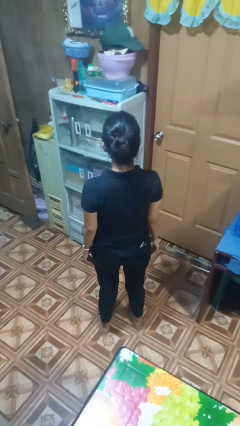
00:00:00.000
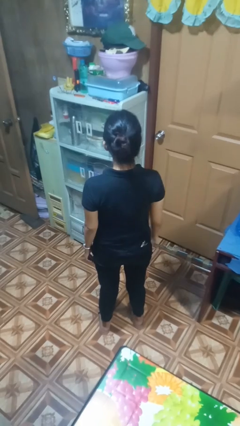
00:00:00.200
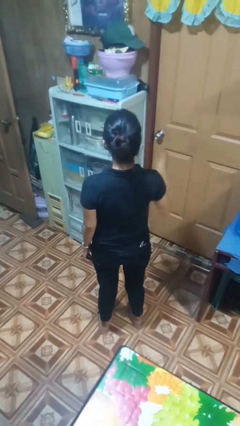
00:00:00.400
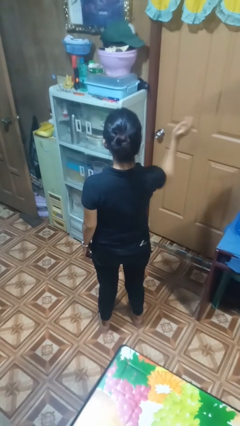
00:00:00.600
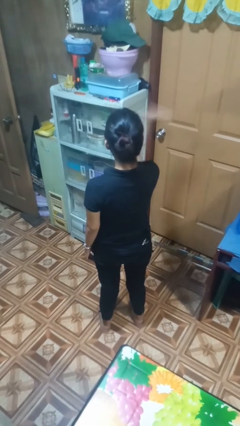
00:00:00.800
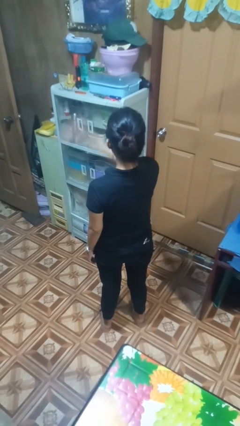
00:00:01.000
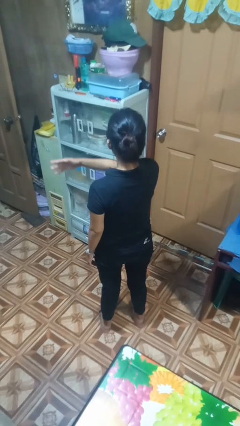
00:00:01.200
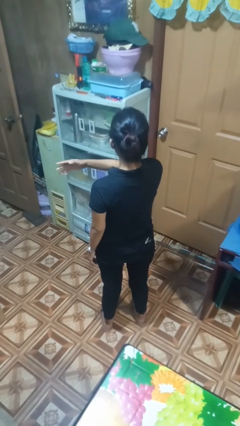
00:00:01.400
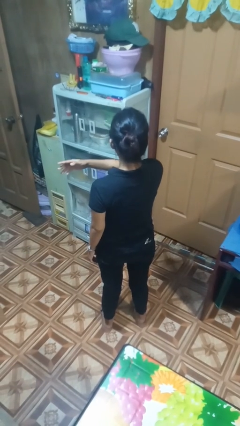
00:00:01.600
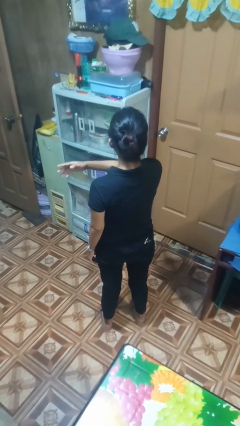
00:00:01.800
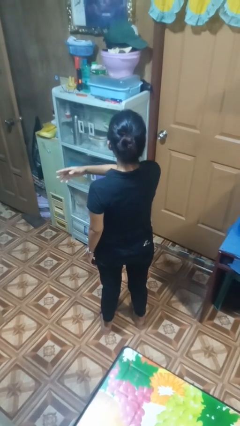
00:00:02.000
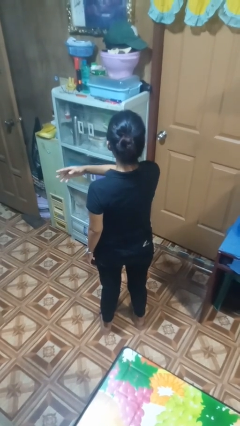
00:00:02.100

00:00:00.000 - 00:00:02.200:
person gestures swipe left

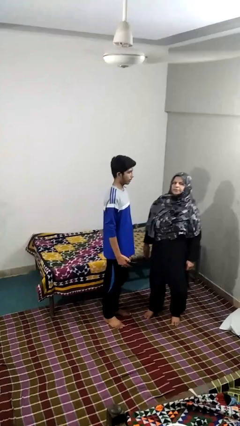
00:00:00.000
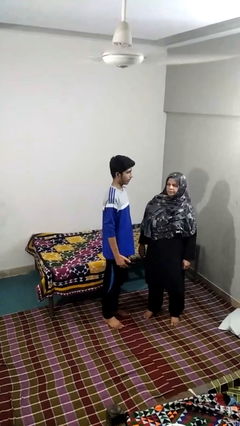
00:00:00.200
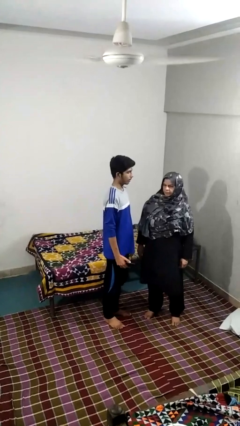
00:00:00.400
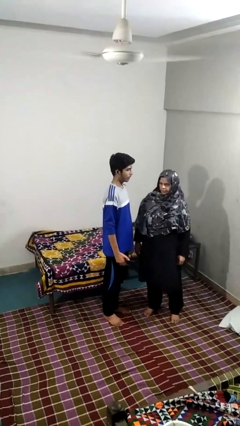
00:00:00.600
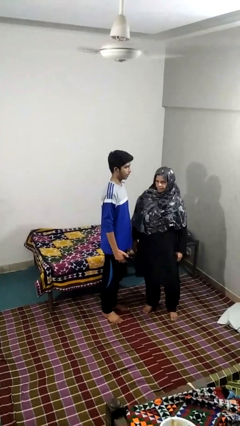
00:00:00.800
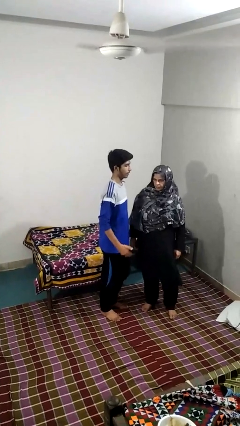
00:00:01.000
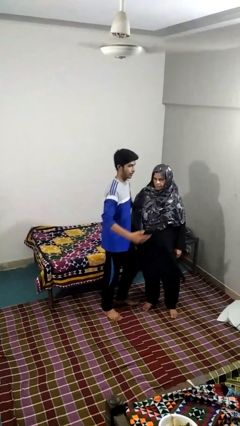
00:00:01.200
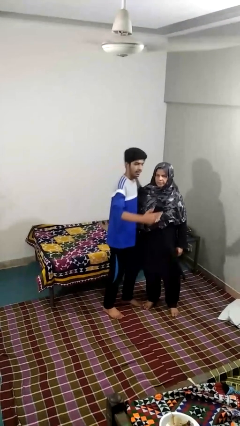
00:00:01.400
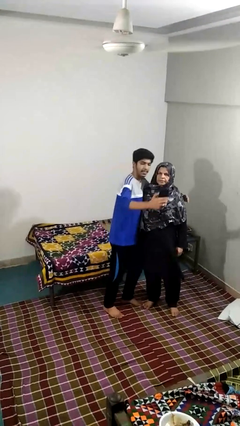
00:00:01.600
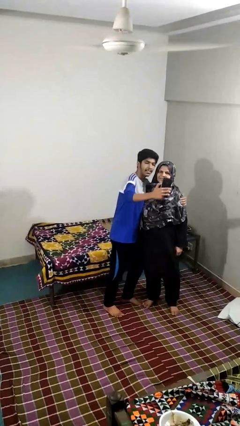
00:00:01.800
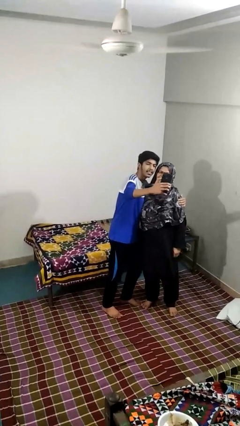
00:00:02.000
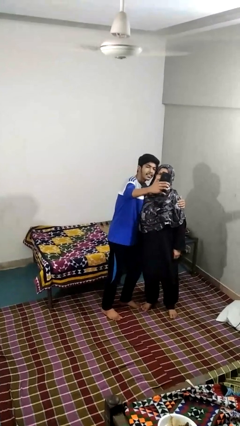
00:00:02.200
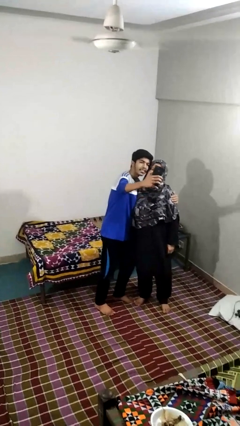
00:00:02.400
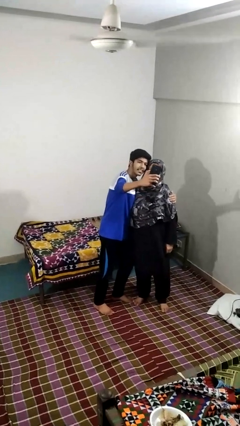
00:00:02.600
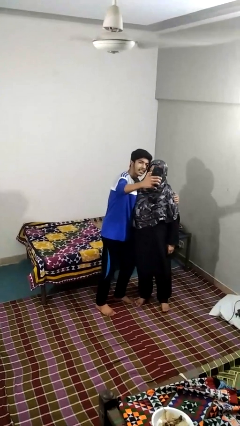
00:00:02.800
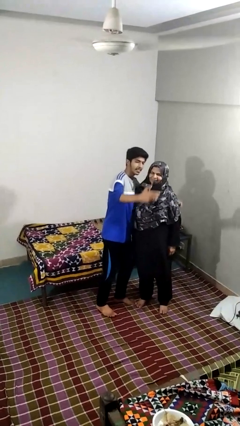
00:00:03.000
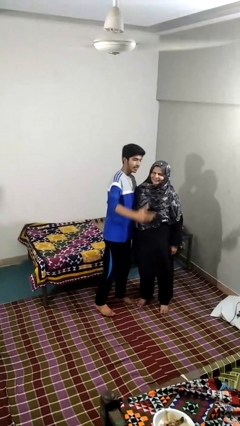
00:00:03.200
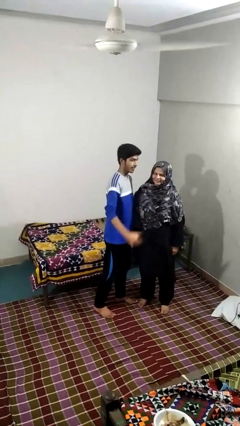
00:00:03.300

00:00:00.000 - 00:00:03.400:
person takes selfie with person

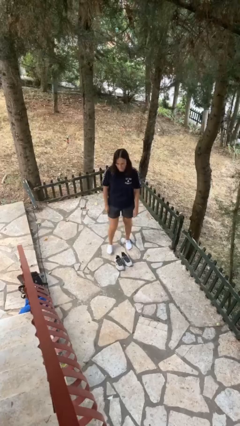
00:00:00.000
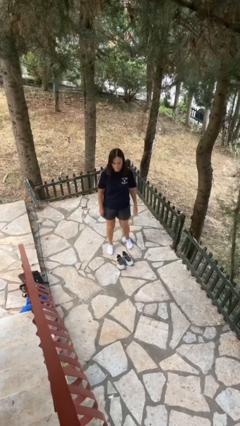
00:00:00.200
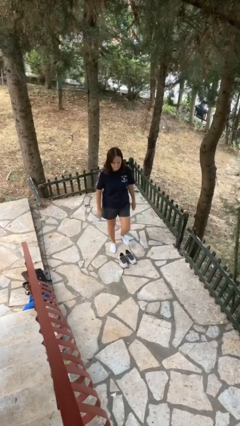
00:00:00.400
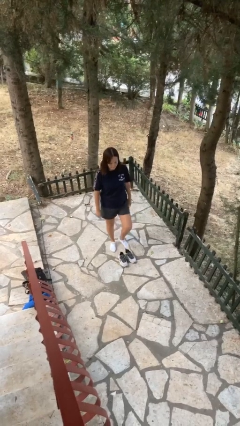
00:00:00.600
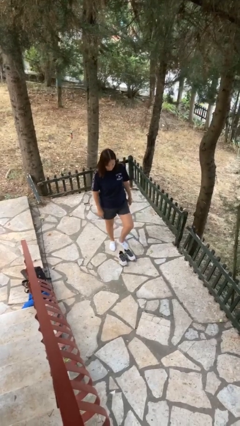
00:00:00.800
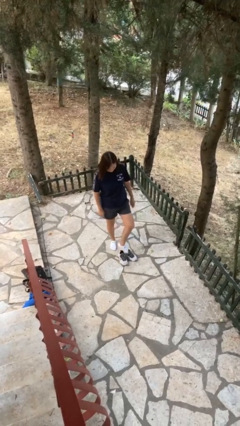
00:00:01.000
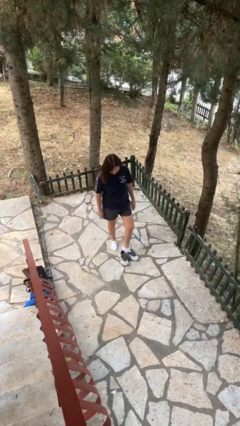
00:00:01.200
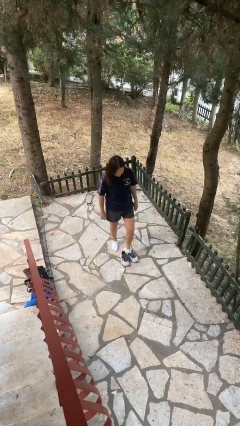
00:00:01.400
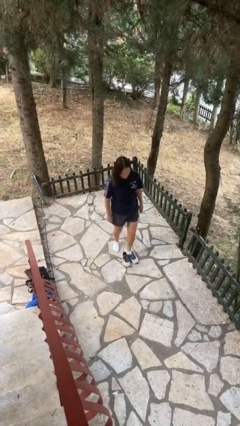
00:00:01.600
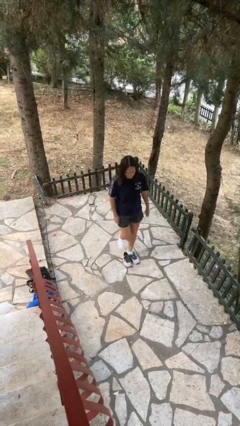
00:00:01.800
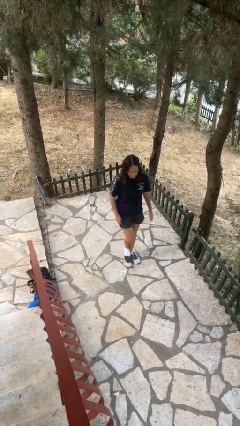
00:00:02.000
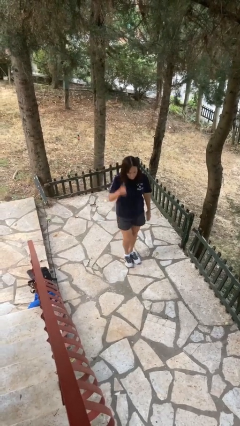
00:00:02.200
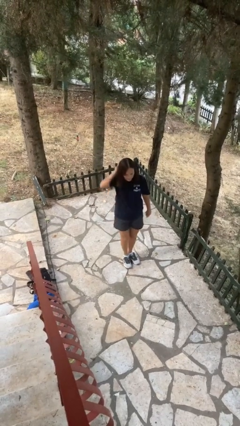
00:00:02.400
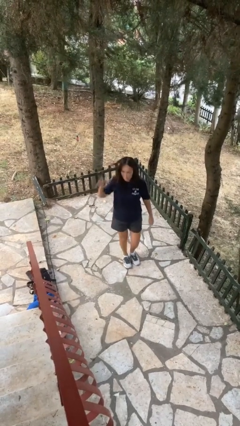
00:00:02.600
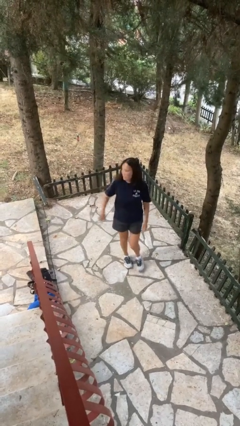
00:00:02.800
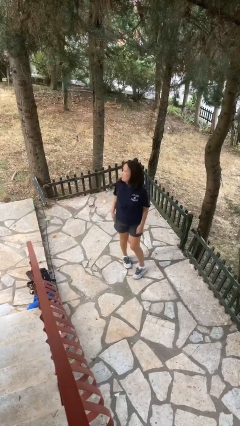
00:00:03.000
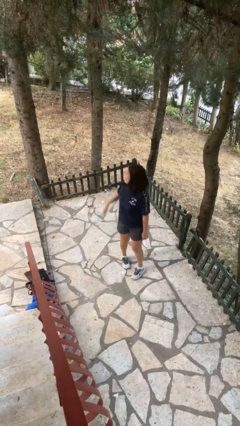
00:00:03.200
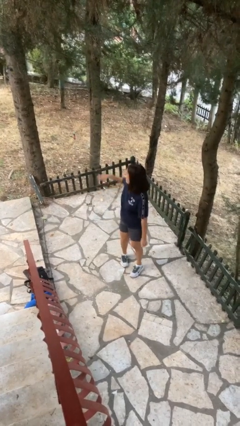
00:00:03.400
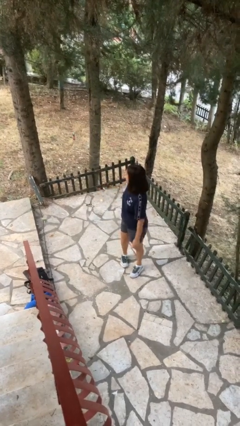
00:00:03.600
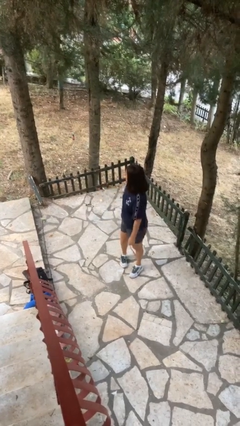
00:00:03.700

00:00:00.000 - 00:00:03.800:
person puts on shoes

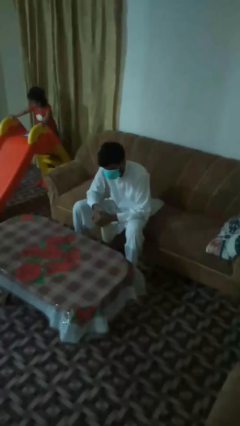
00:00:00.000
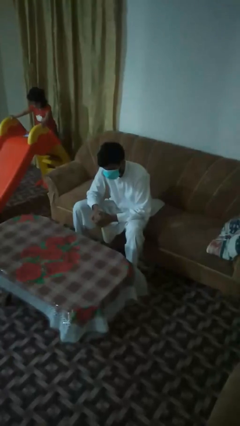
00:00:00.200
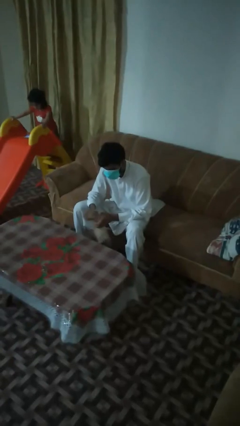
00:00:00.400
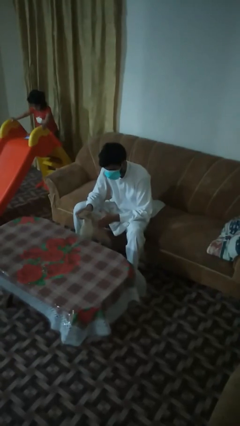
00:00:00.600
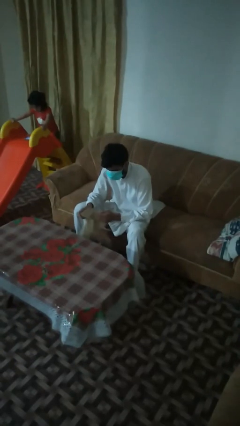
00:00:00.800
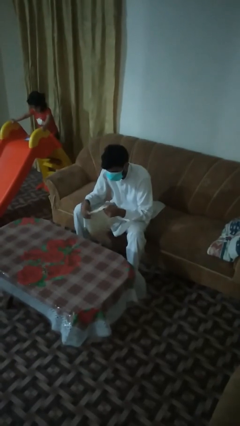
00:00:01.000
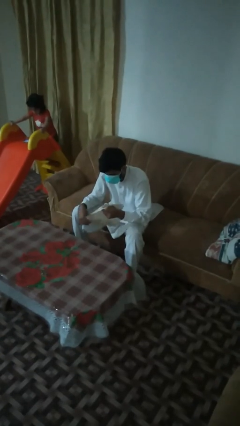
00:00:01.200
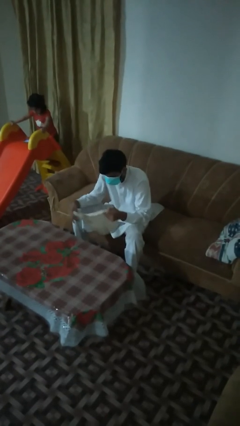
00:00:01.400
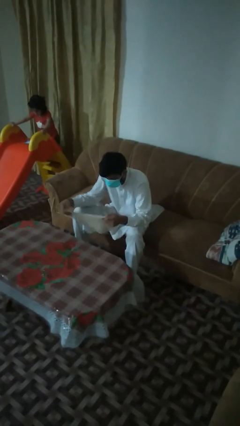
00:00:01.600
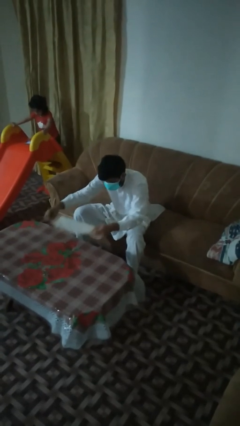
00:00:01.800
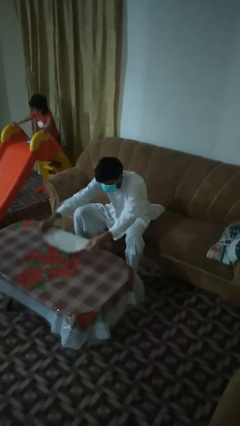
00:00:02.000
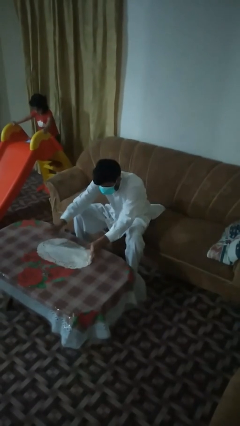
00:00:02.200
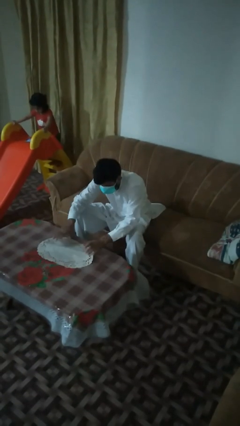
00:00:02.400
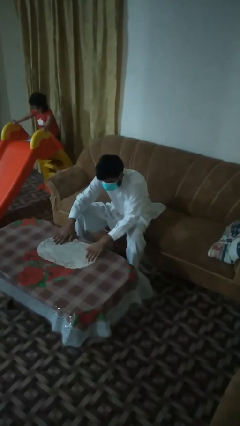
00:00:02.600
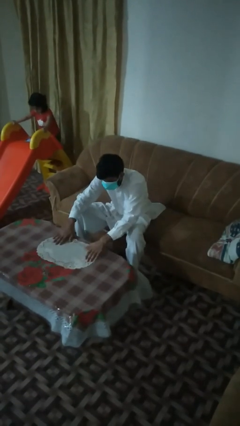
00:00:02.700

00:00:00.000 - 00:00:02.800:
person spreads tablecloth

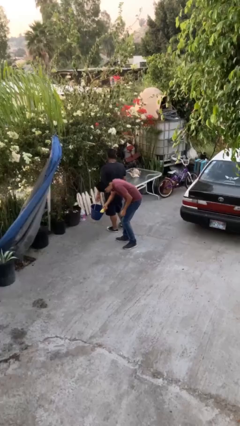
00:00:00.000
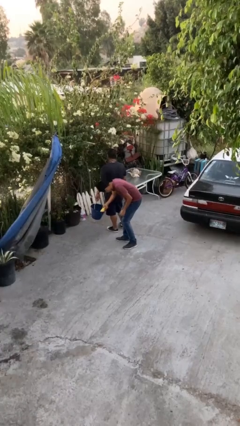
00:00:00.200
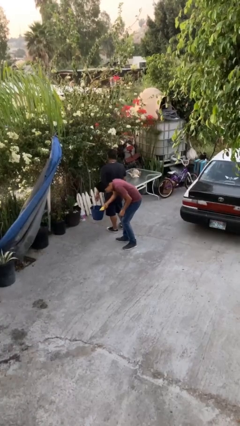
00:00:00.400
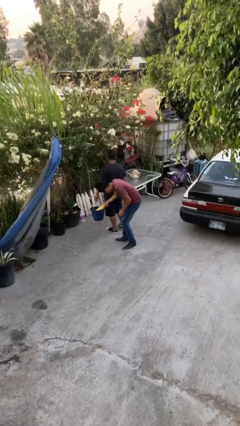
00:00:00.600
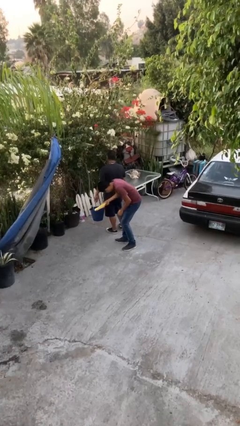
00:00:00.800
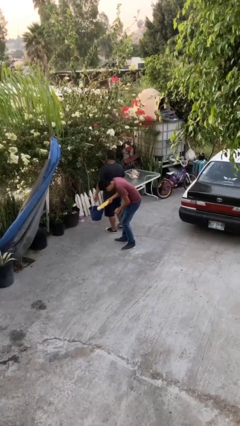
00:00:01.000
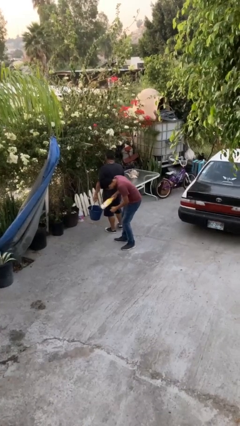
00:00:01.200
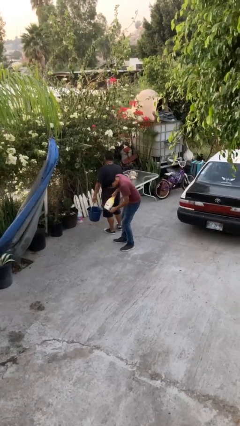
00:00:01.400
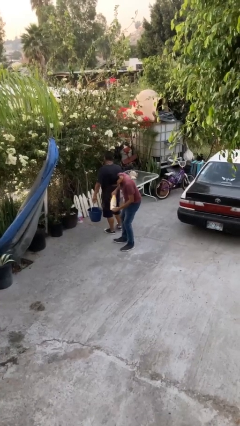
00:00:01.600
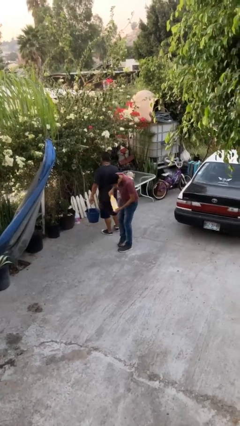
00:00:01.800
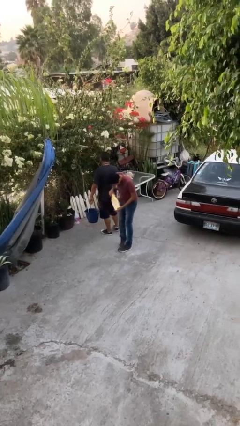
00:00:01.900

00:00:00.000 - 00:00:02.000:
person steals object from person

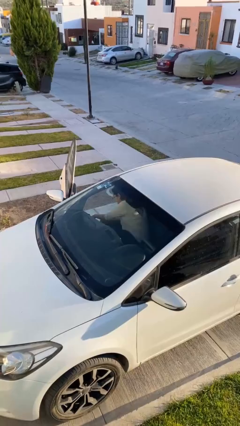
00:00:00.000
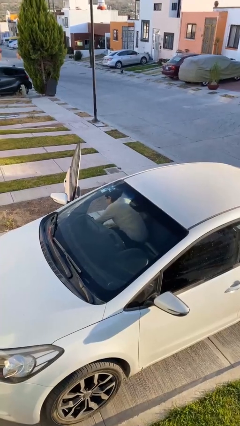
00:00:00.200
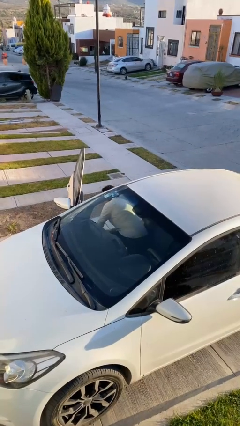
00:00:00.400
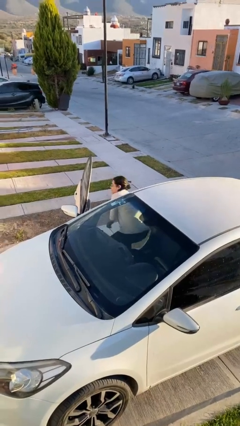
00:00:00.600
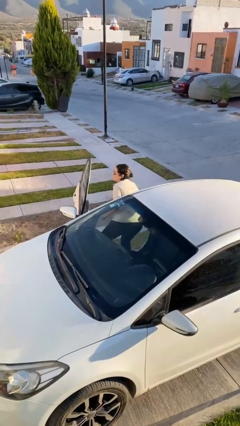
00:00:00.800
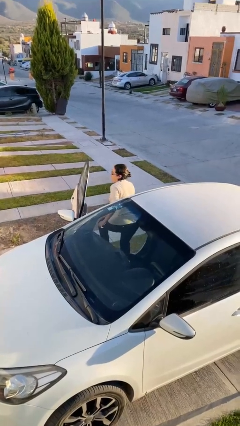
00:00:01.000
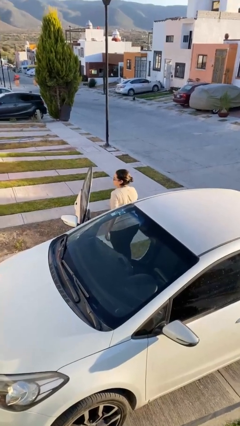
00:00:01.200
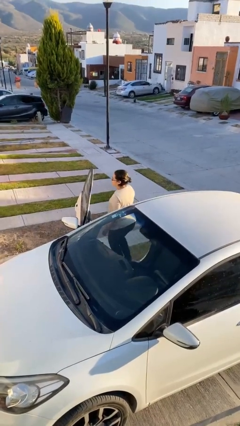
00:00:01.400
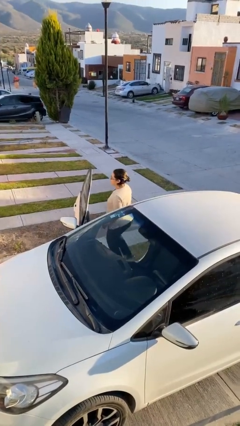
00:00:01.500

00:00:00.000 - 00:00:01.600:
person exits car

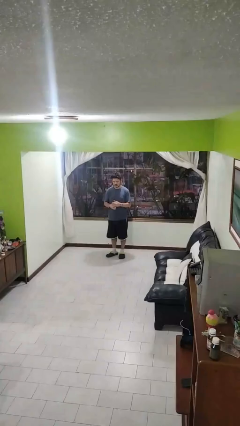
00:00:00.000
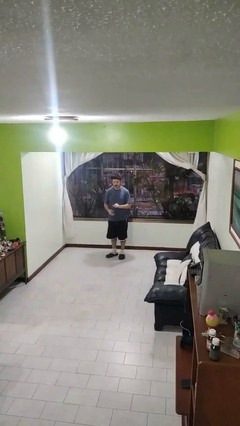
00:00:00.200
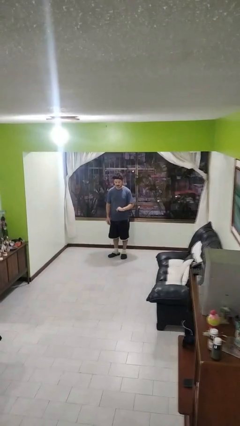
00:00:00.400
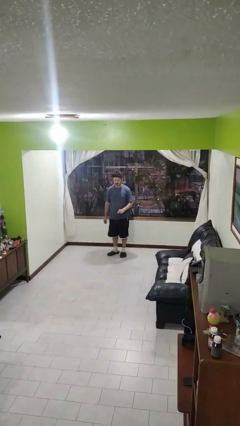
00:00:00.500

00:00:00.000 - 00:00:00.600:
person puts on ring

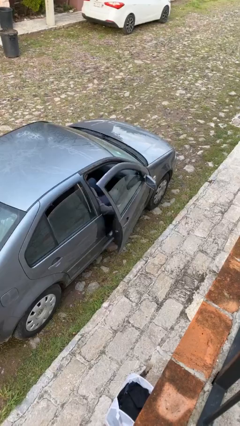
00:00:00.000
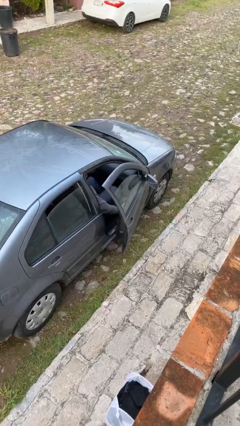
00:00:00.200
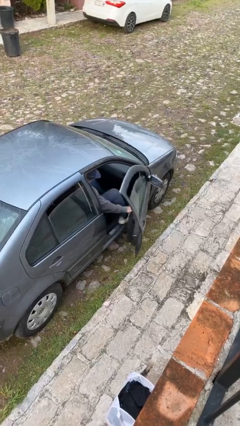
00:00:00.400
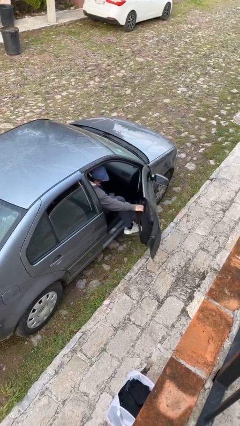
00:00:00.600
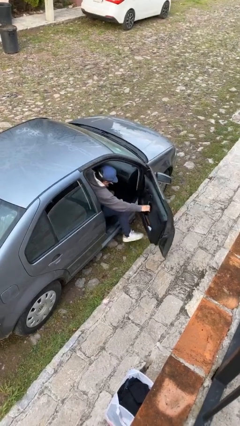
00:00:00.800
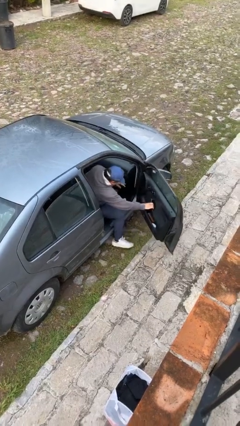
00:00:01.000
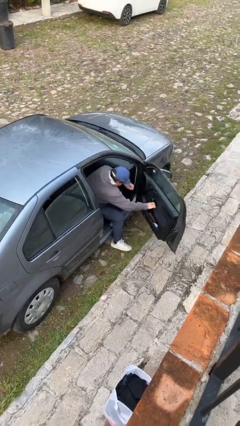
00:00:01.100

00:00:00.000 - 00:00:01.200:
person opens car door
